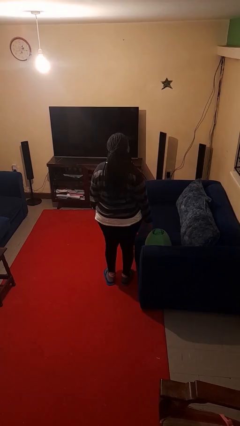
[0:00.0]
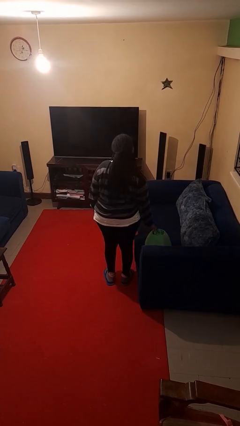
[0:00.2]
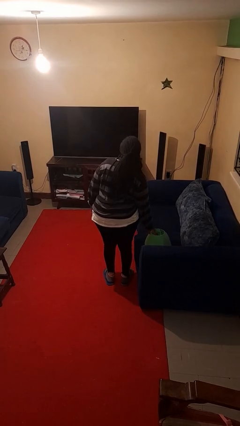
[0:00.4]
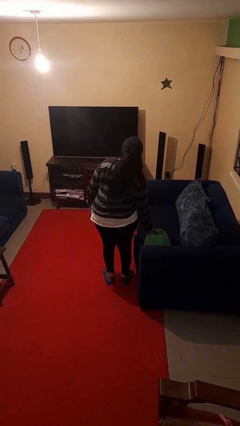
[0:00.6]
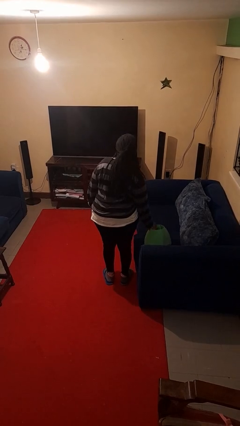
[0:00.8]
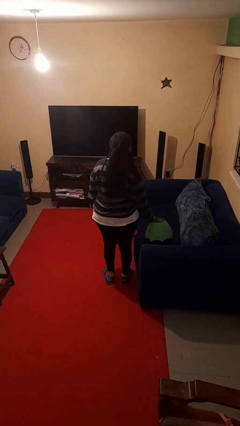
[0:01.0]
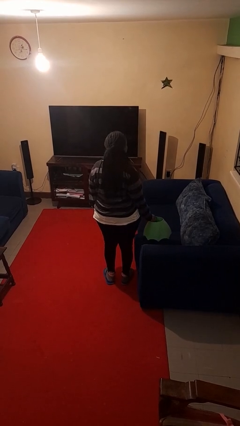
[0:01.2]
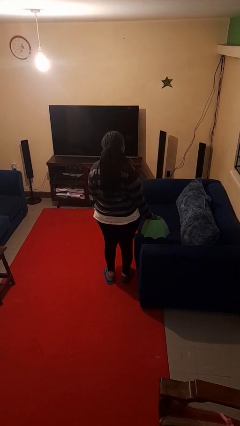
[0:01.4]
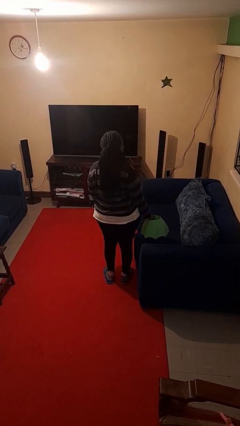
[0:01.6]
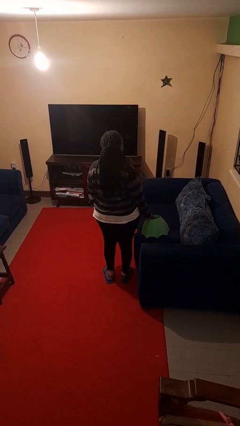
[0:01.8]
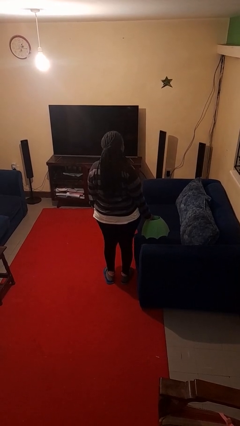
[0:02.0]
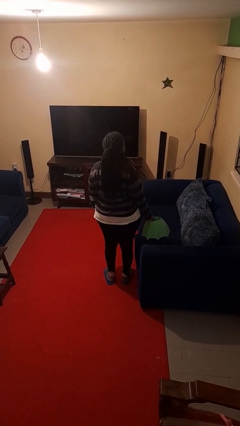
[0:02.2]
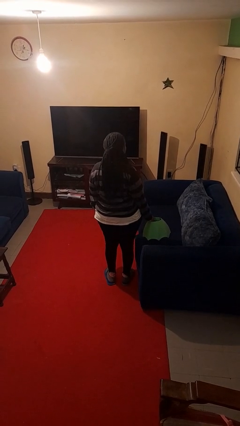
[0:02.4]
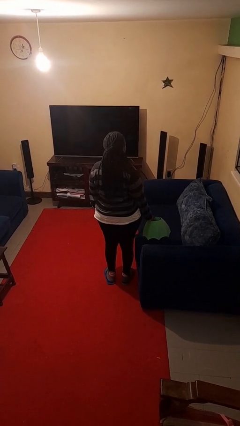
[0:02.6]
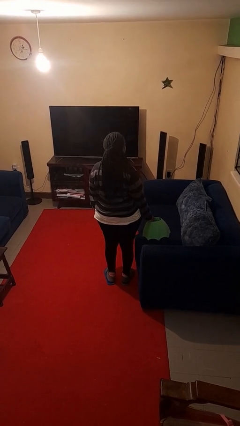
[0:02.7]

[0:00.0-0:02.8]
person picks up object from couch

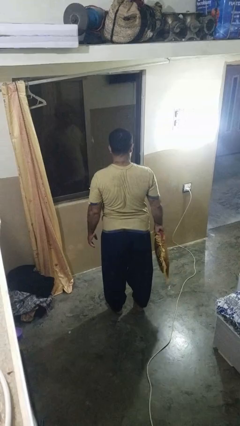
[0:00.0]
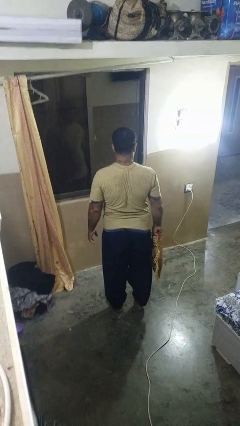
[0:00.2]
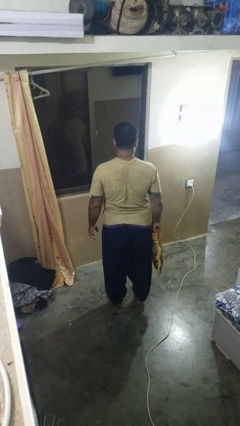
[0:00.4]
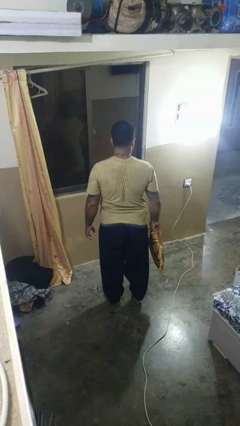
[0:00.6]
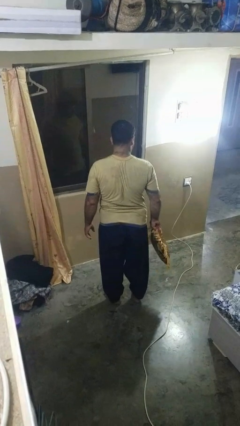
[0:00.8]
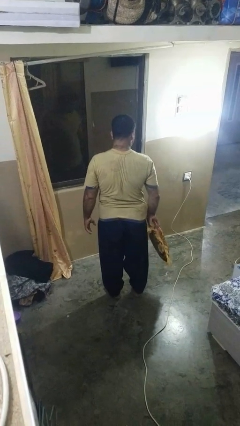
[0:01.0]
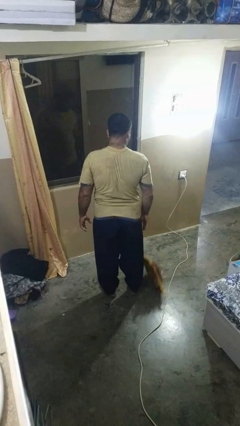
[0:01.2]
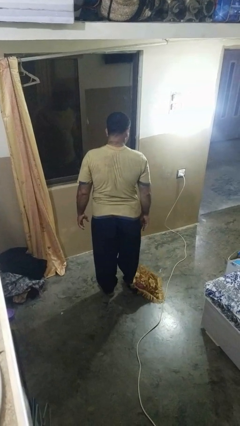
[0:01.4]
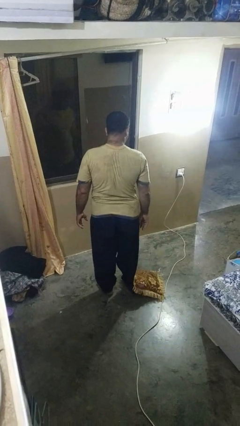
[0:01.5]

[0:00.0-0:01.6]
person drops object

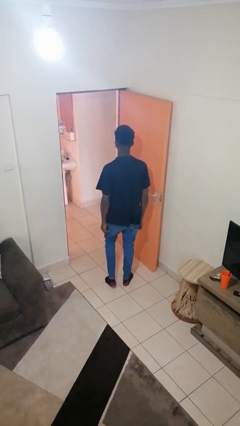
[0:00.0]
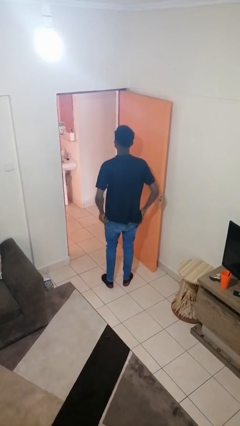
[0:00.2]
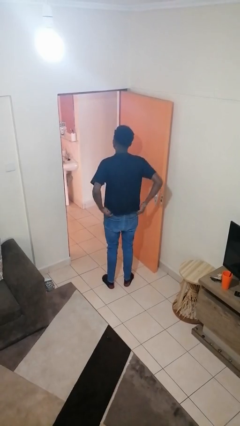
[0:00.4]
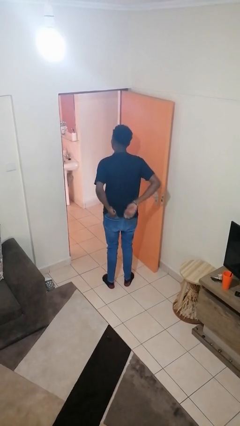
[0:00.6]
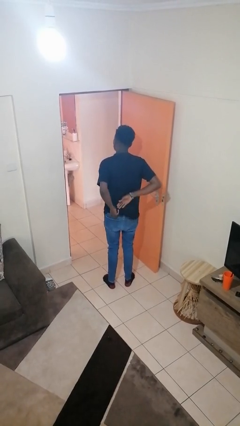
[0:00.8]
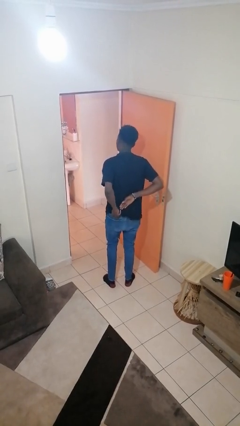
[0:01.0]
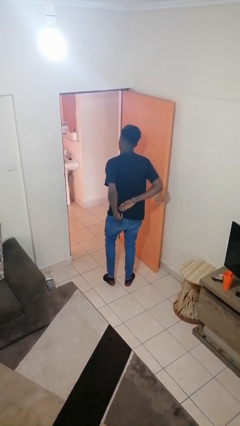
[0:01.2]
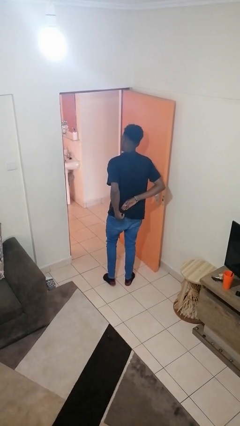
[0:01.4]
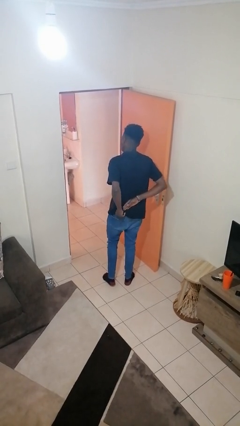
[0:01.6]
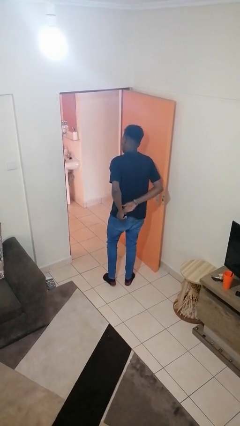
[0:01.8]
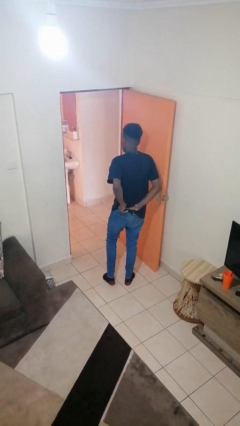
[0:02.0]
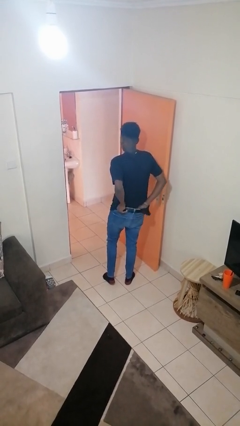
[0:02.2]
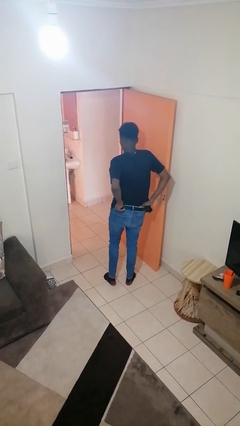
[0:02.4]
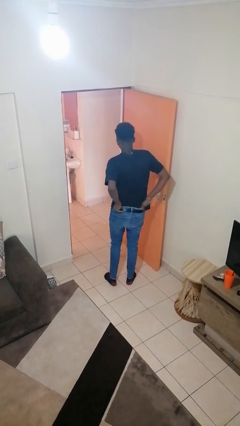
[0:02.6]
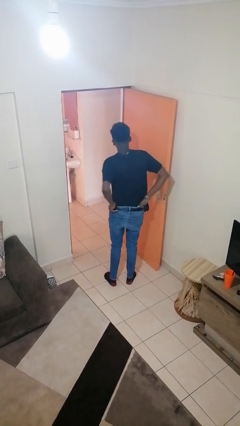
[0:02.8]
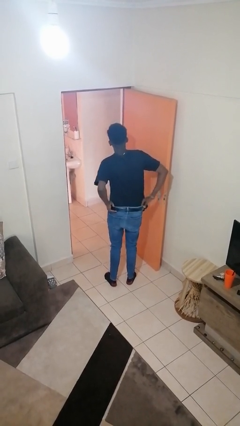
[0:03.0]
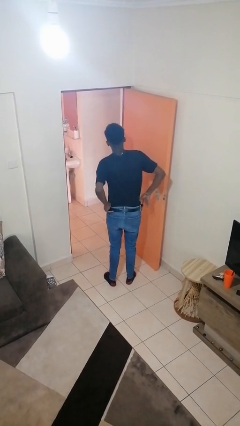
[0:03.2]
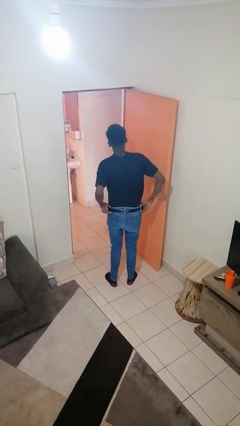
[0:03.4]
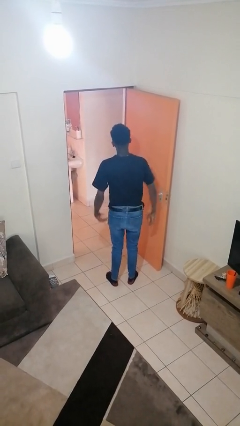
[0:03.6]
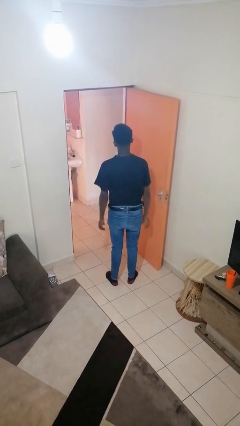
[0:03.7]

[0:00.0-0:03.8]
person tucks in shirt

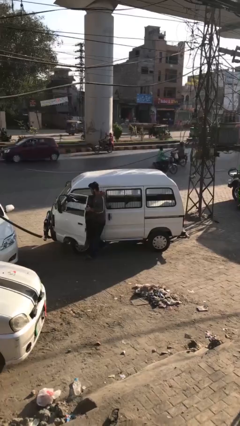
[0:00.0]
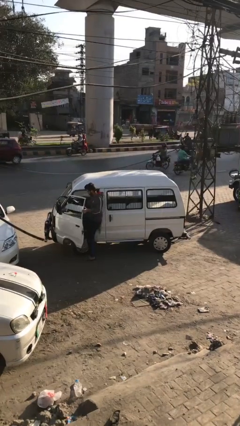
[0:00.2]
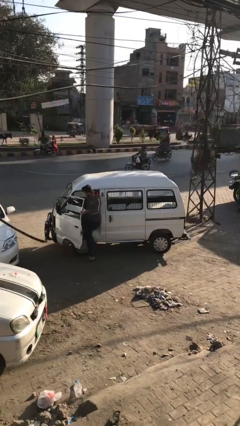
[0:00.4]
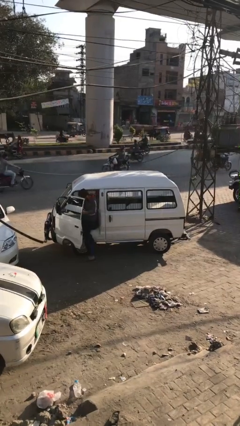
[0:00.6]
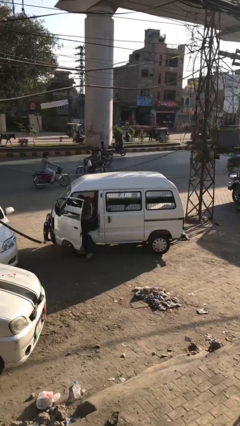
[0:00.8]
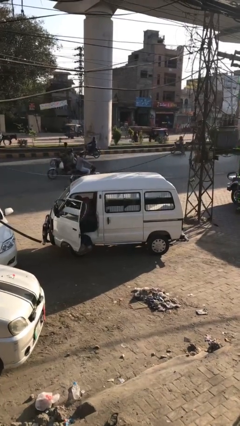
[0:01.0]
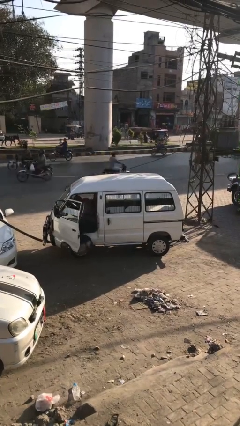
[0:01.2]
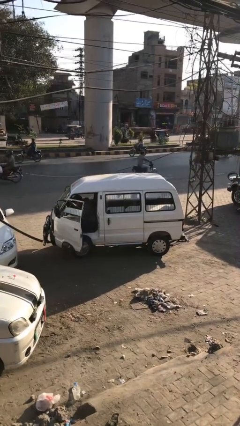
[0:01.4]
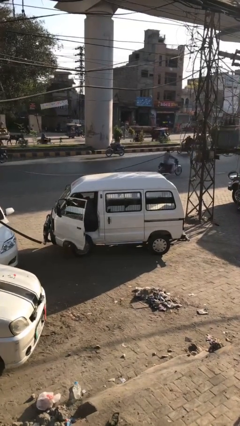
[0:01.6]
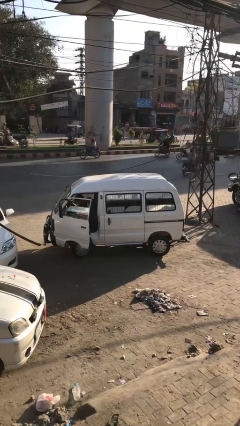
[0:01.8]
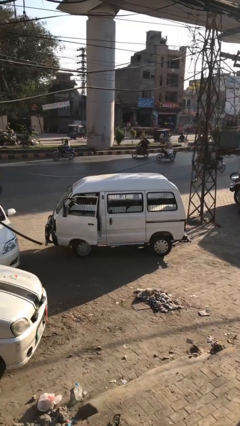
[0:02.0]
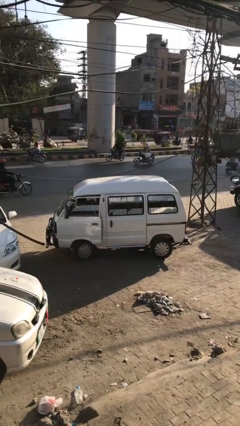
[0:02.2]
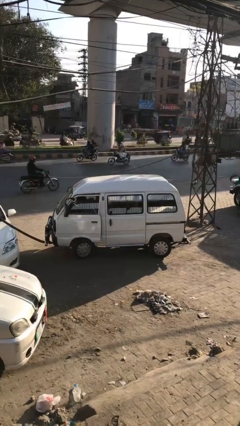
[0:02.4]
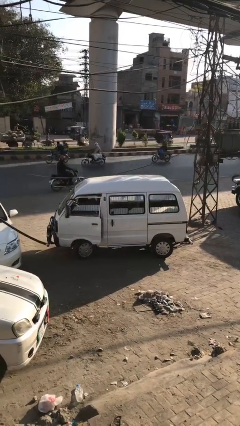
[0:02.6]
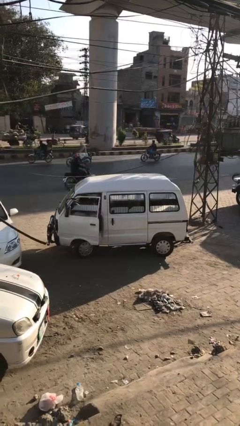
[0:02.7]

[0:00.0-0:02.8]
car picks up person

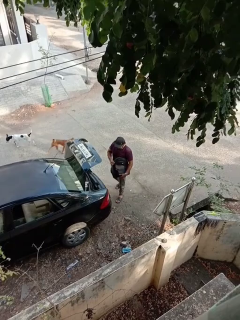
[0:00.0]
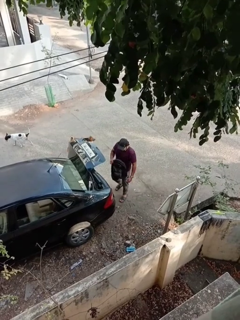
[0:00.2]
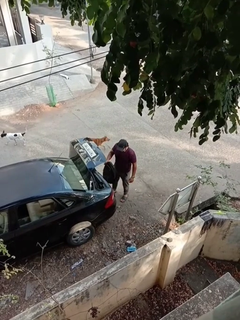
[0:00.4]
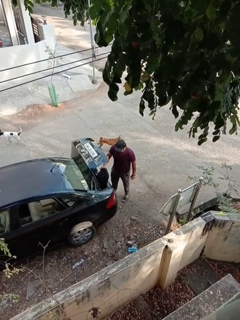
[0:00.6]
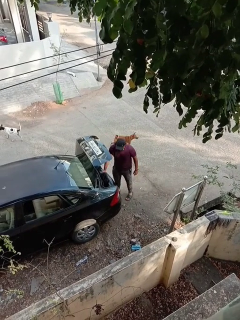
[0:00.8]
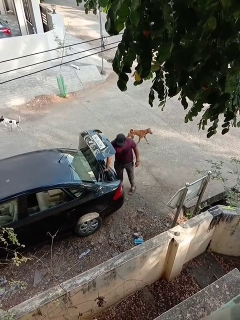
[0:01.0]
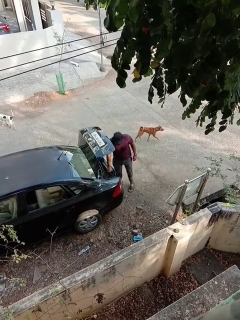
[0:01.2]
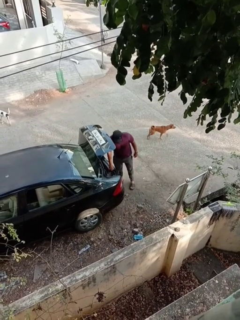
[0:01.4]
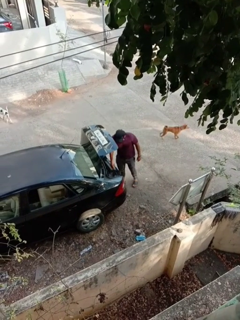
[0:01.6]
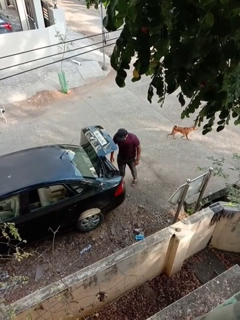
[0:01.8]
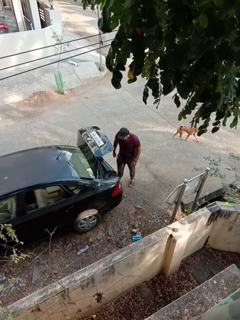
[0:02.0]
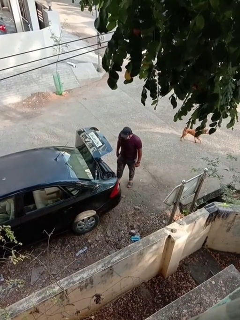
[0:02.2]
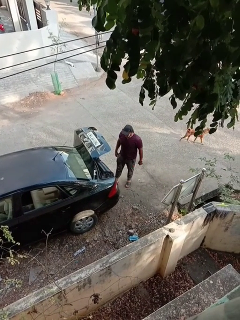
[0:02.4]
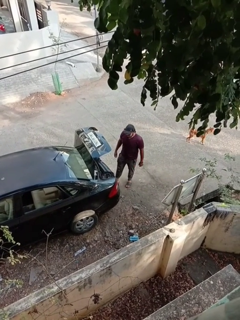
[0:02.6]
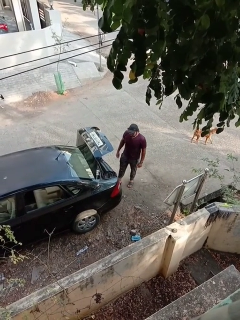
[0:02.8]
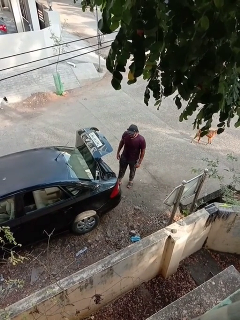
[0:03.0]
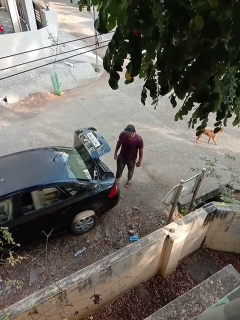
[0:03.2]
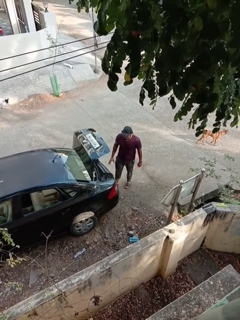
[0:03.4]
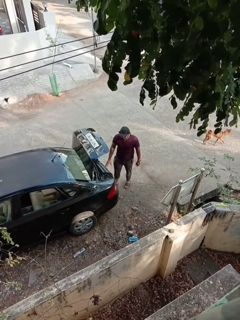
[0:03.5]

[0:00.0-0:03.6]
person loads car

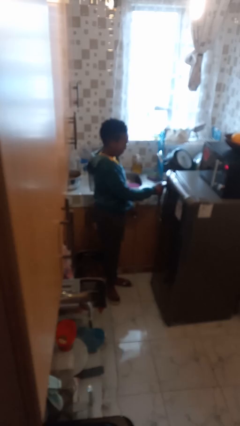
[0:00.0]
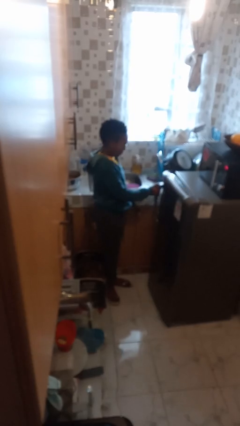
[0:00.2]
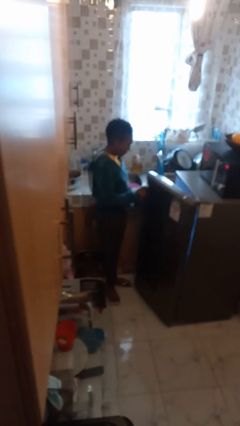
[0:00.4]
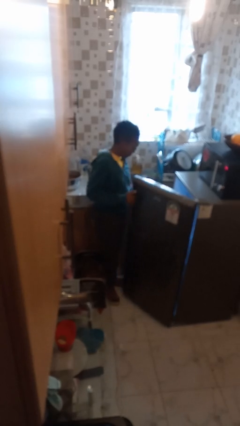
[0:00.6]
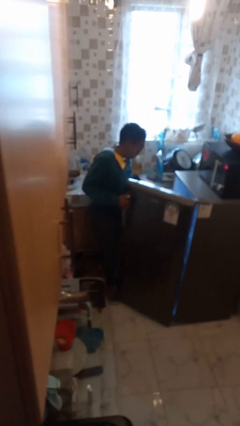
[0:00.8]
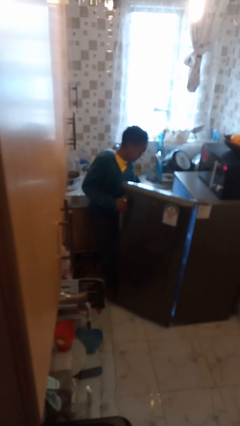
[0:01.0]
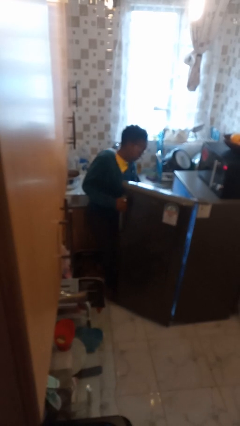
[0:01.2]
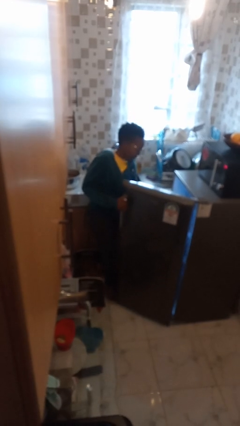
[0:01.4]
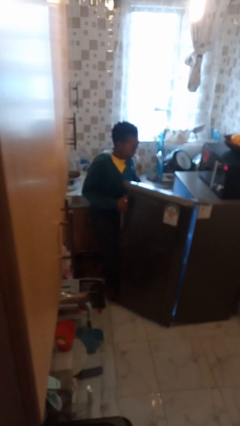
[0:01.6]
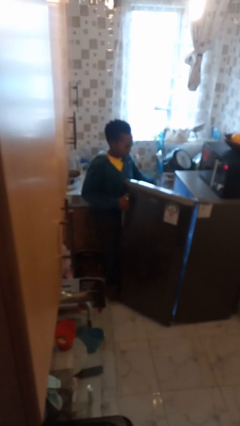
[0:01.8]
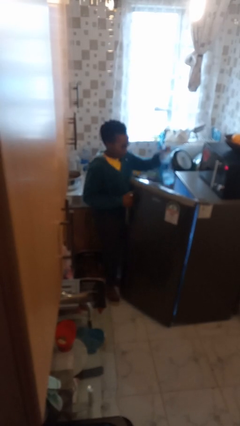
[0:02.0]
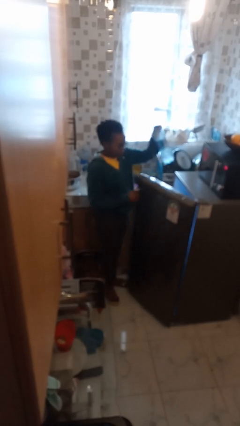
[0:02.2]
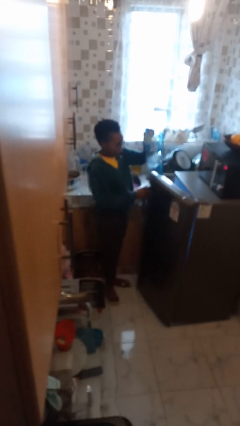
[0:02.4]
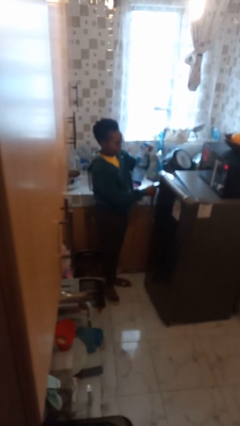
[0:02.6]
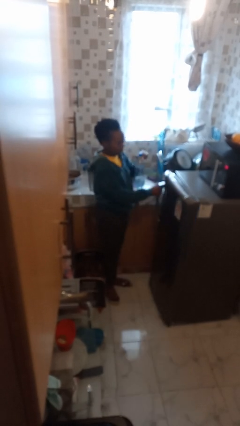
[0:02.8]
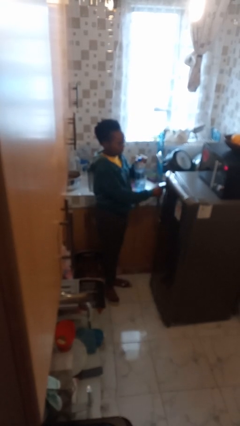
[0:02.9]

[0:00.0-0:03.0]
person takes object from refrigerator
